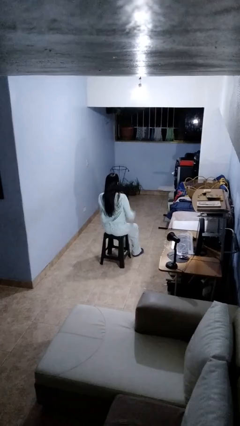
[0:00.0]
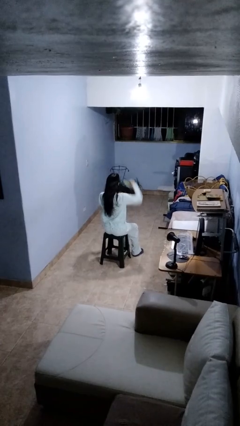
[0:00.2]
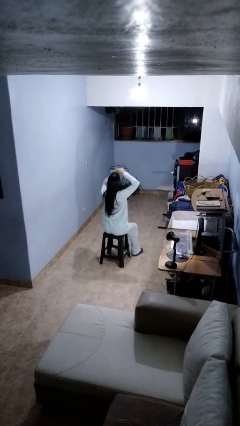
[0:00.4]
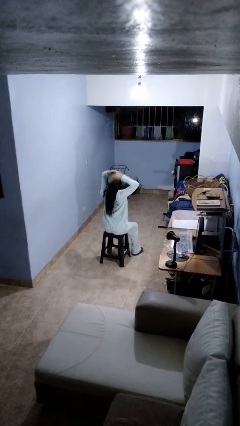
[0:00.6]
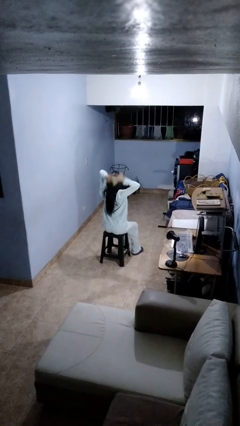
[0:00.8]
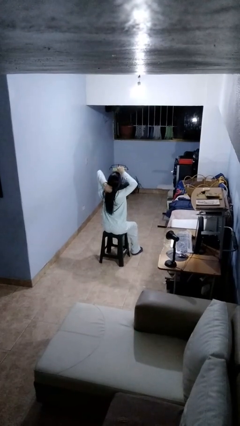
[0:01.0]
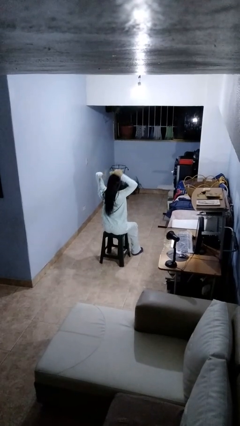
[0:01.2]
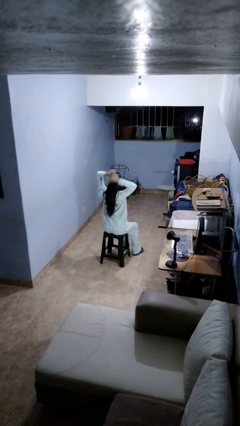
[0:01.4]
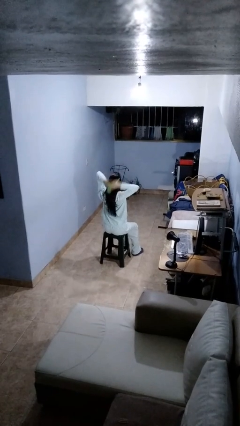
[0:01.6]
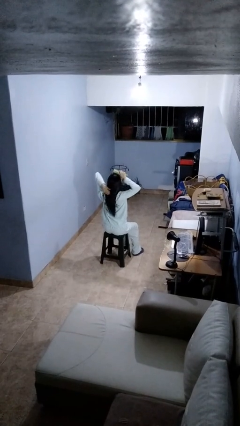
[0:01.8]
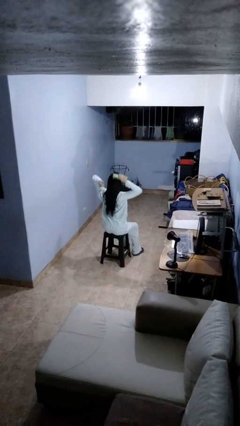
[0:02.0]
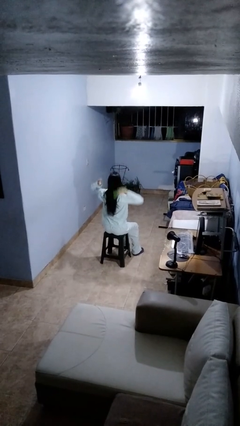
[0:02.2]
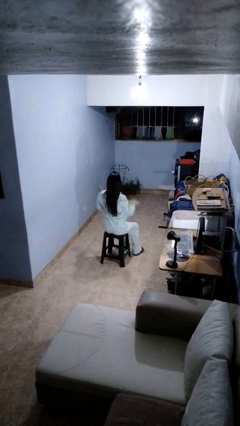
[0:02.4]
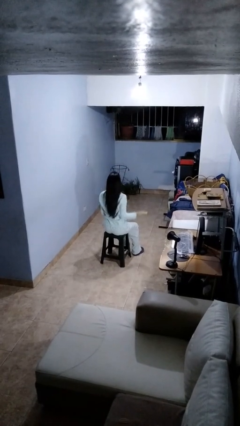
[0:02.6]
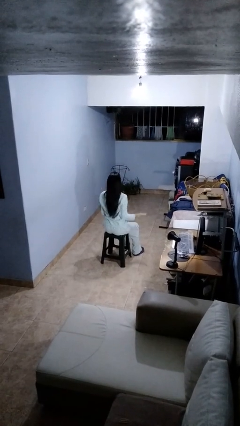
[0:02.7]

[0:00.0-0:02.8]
person brushes hair

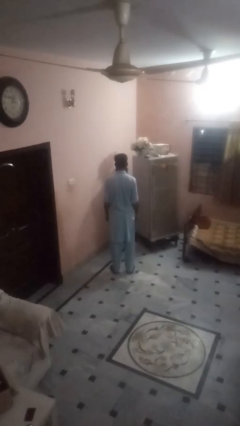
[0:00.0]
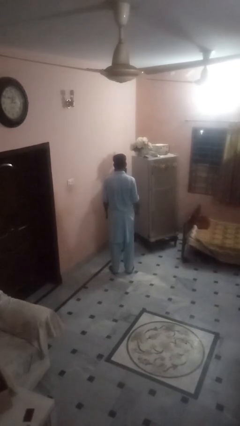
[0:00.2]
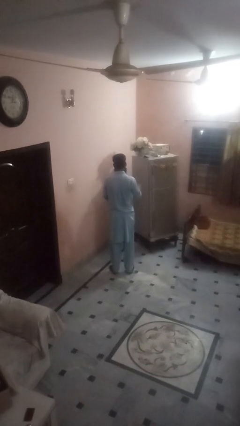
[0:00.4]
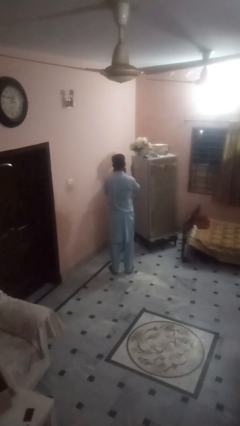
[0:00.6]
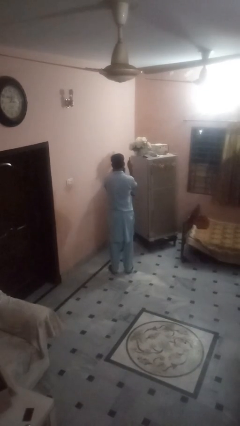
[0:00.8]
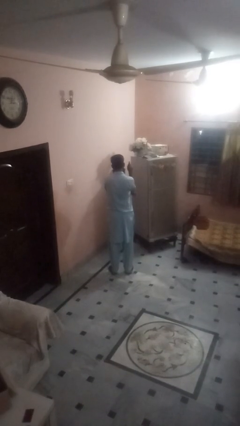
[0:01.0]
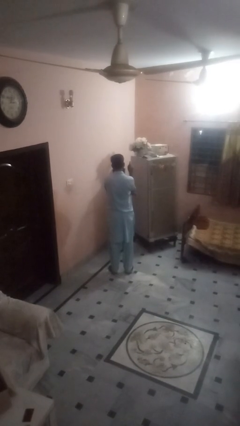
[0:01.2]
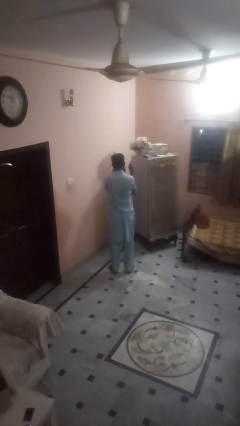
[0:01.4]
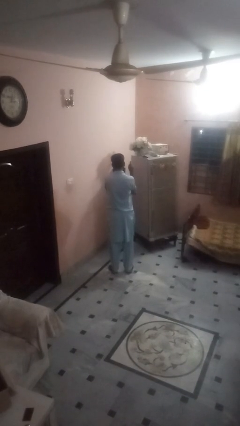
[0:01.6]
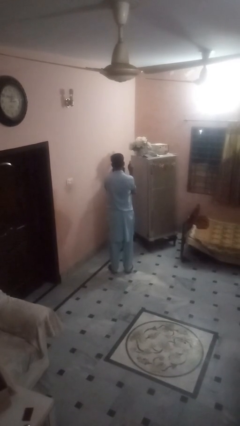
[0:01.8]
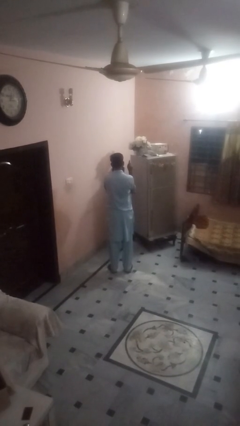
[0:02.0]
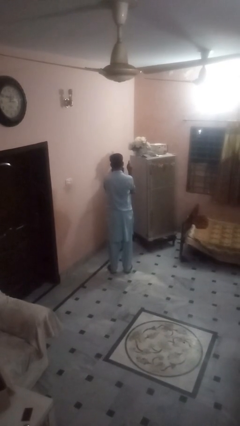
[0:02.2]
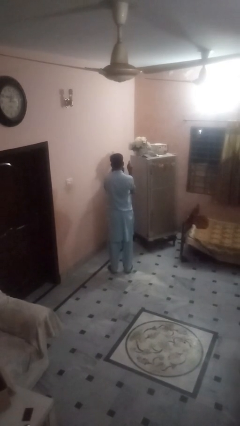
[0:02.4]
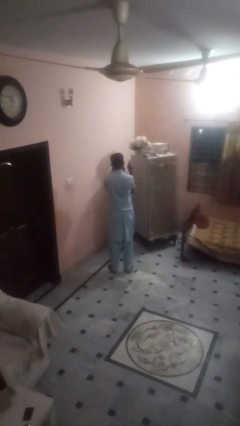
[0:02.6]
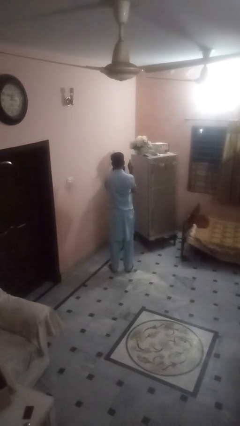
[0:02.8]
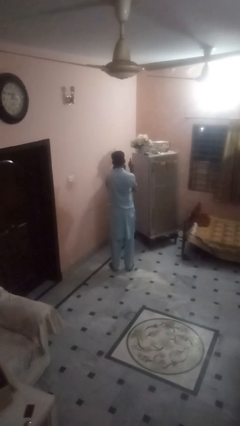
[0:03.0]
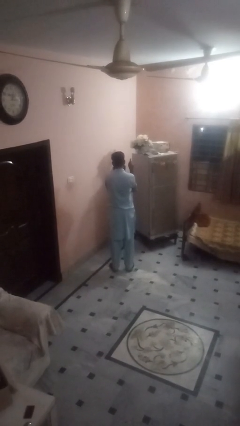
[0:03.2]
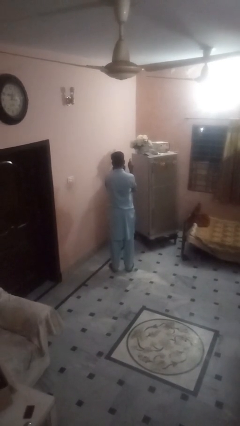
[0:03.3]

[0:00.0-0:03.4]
person gestures number one

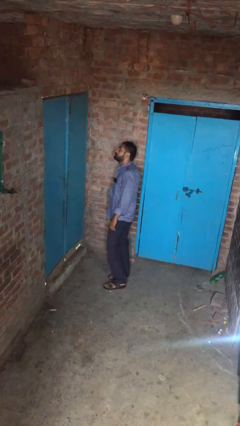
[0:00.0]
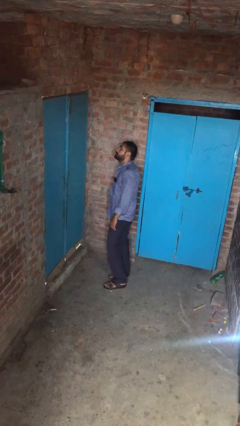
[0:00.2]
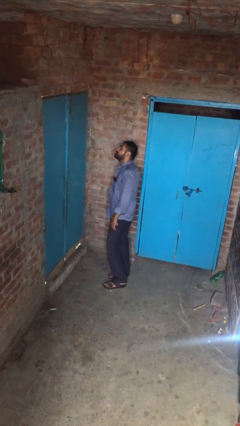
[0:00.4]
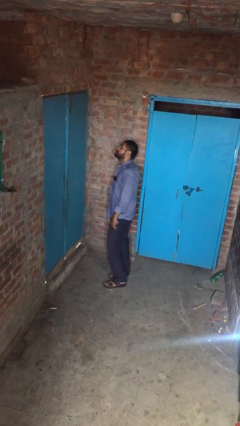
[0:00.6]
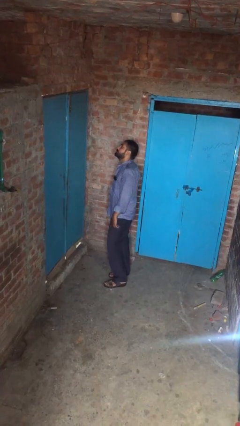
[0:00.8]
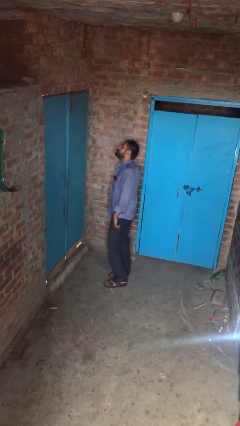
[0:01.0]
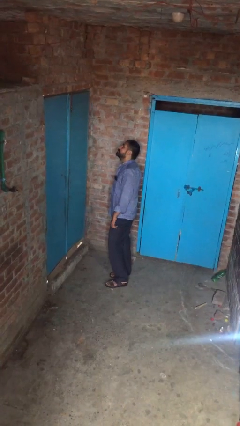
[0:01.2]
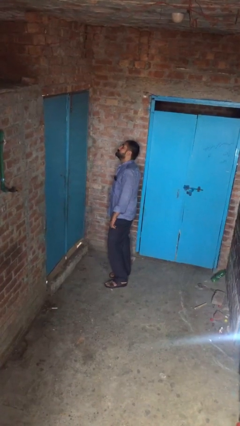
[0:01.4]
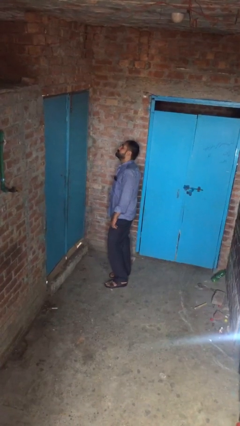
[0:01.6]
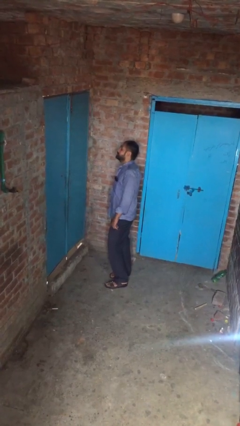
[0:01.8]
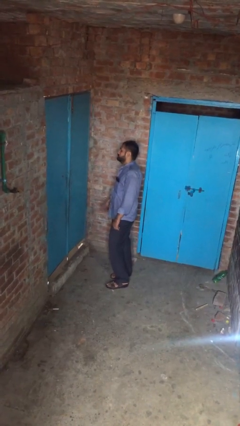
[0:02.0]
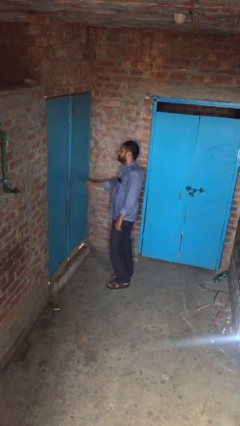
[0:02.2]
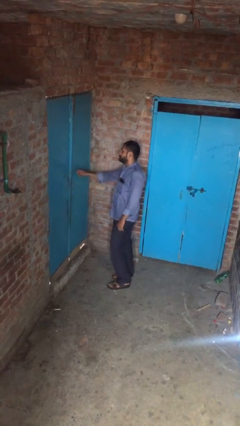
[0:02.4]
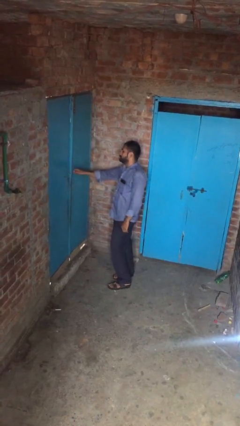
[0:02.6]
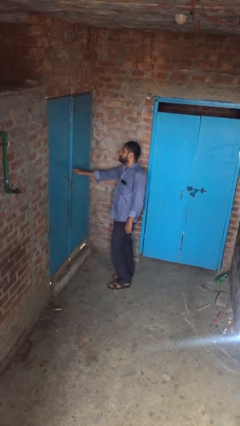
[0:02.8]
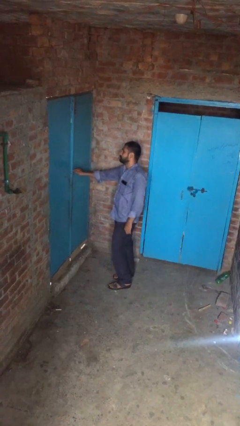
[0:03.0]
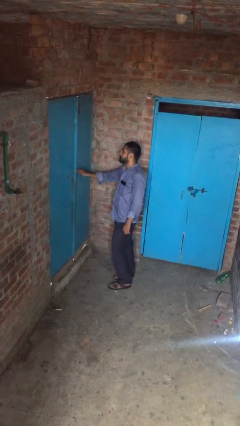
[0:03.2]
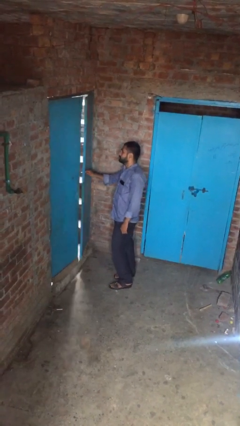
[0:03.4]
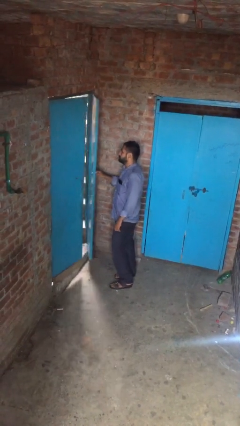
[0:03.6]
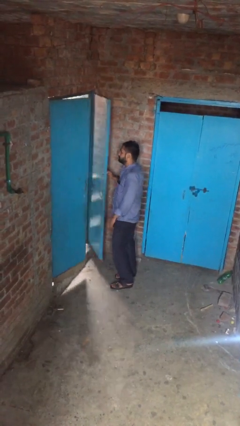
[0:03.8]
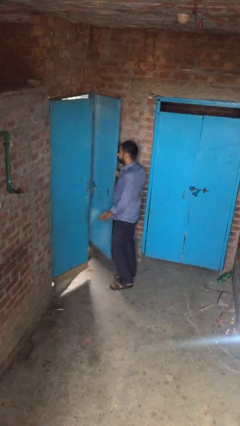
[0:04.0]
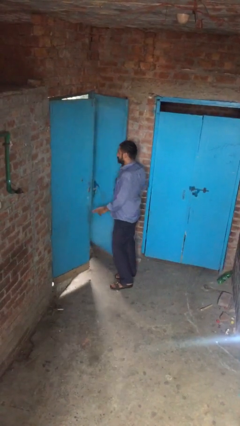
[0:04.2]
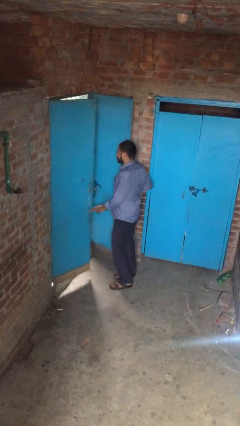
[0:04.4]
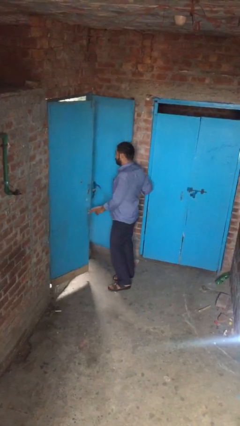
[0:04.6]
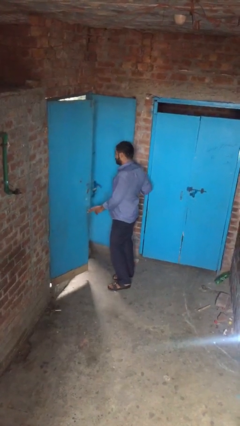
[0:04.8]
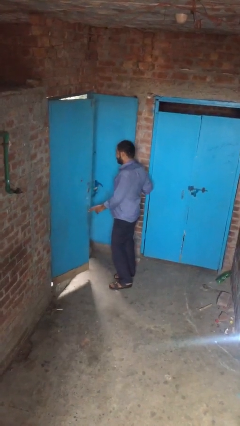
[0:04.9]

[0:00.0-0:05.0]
person opens facility door

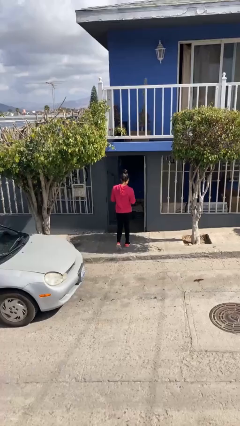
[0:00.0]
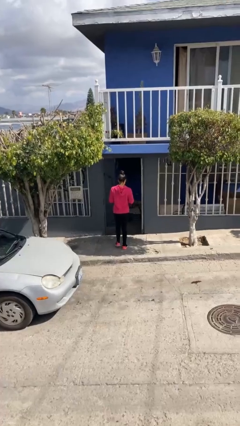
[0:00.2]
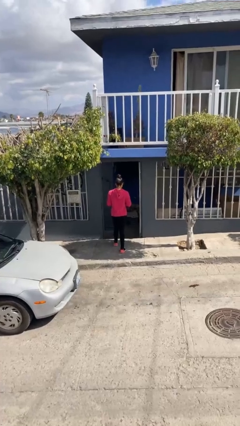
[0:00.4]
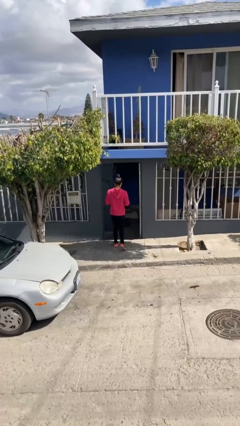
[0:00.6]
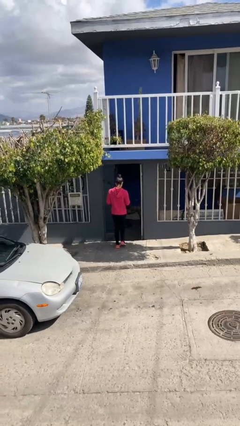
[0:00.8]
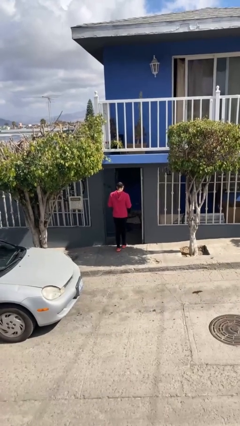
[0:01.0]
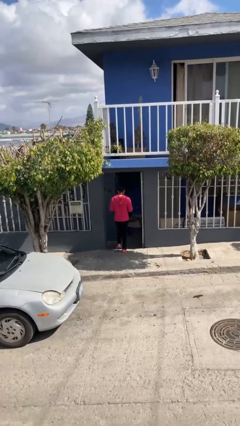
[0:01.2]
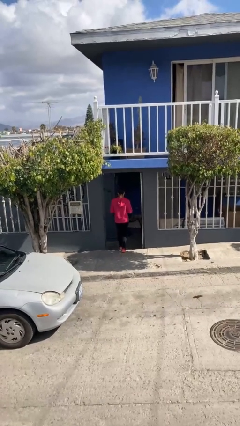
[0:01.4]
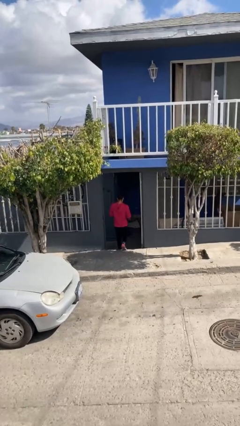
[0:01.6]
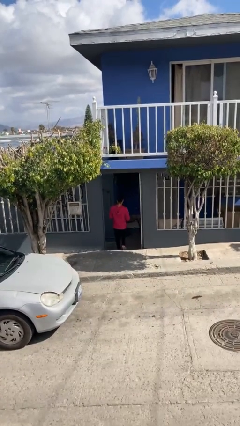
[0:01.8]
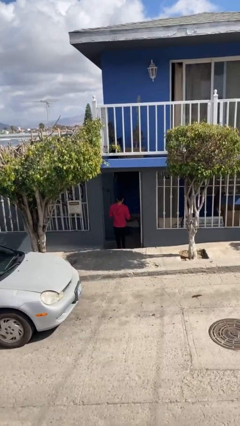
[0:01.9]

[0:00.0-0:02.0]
person exits scene through structure

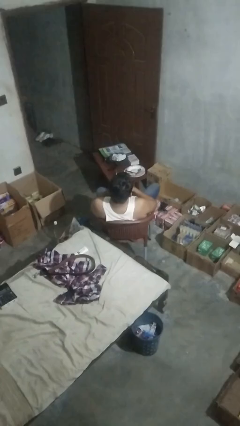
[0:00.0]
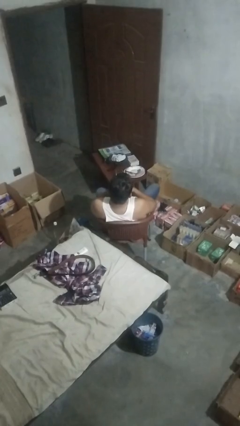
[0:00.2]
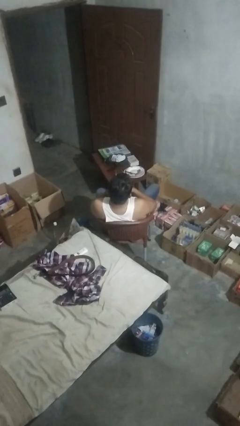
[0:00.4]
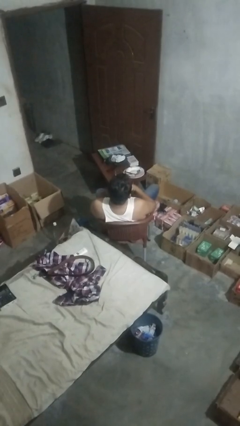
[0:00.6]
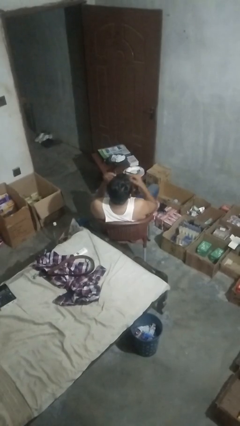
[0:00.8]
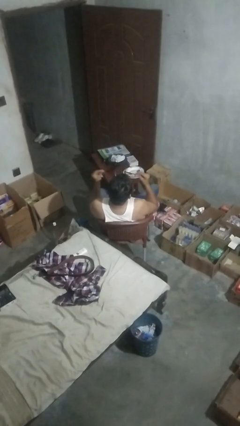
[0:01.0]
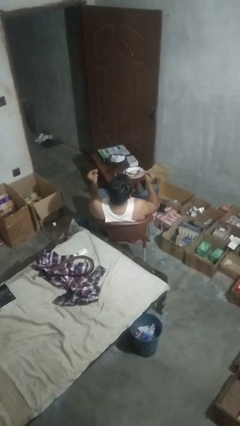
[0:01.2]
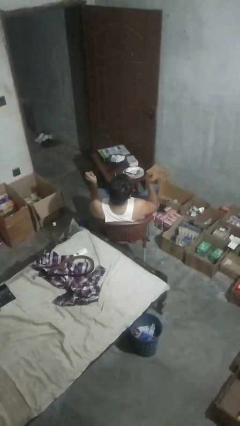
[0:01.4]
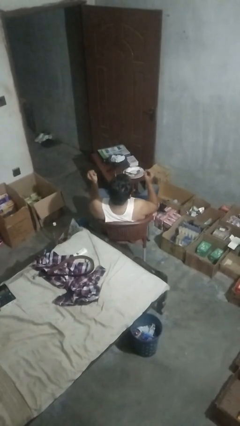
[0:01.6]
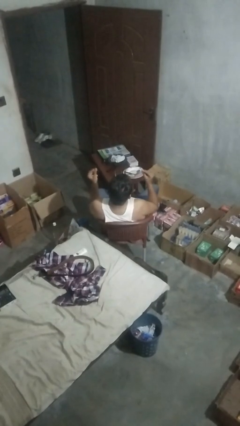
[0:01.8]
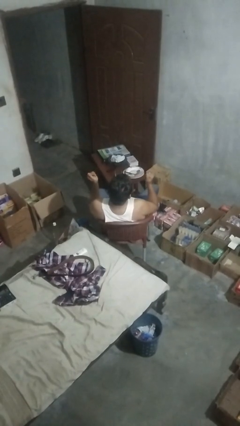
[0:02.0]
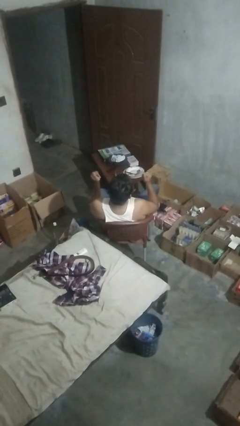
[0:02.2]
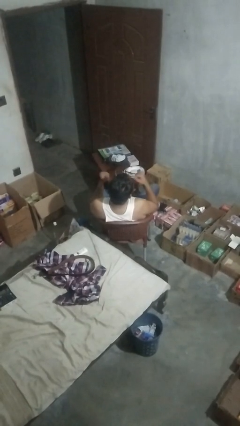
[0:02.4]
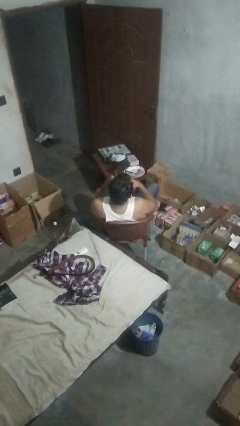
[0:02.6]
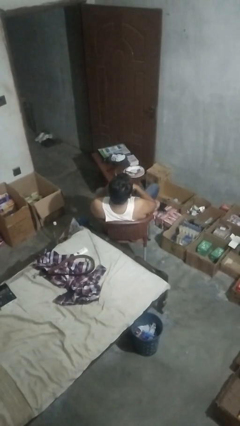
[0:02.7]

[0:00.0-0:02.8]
person snaps fingers

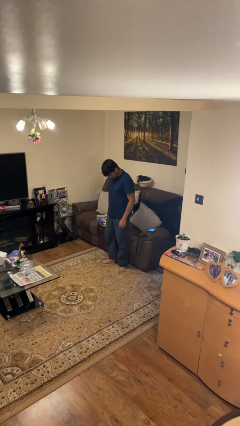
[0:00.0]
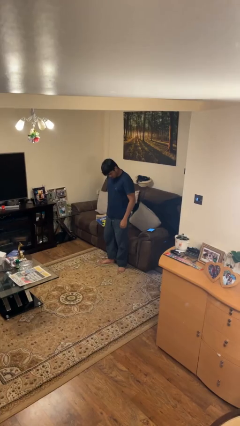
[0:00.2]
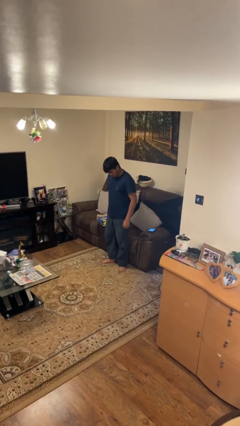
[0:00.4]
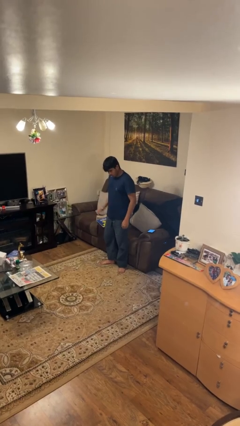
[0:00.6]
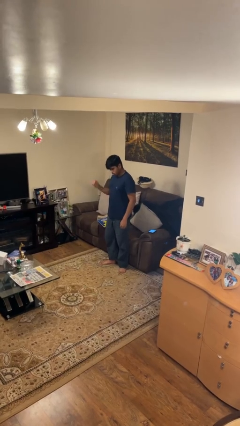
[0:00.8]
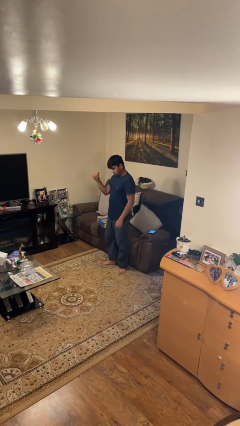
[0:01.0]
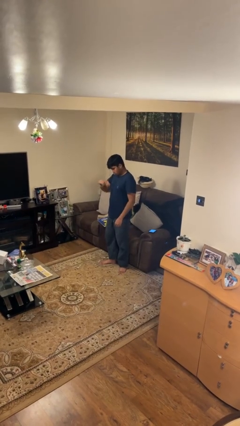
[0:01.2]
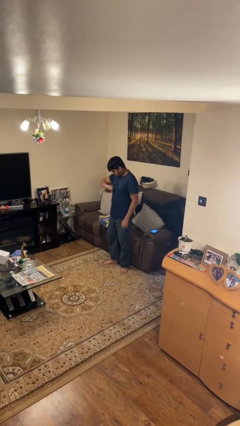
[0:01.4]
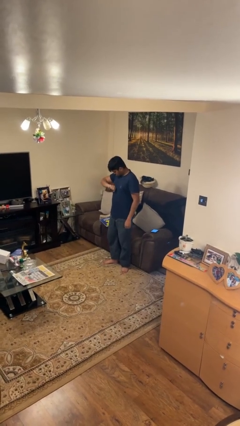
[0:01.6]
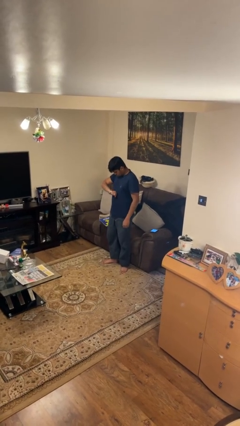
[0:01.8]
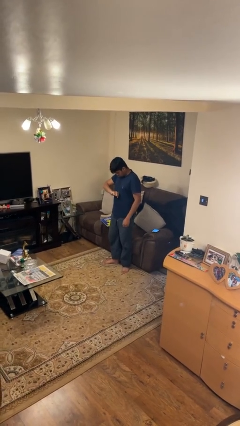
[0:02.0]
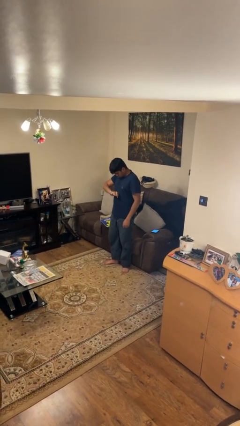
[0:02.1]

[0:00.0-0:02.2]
person looks at wristwatch
